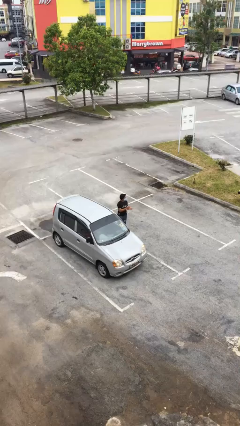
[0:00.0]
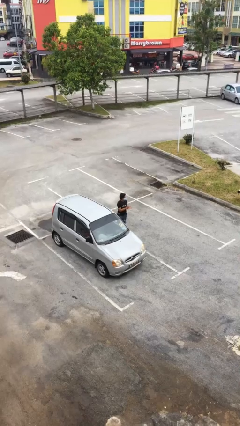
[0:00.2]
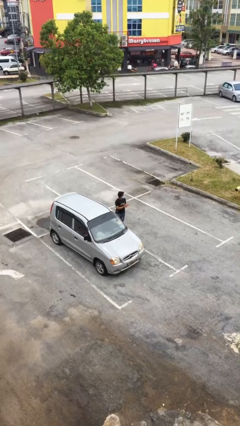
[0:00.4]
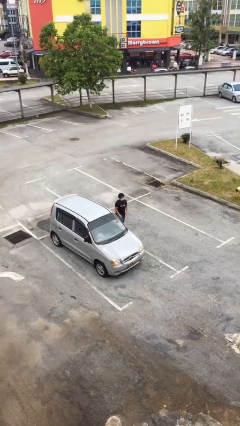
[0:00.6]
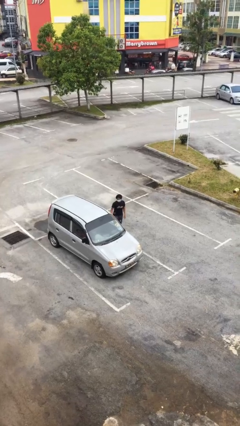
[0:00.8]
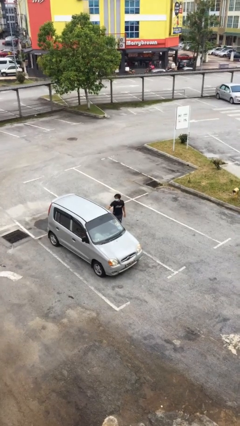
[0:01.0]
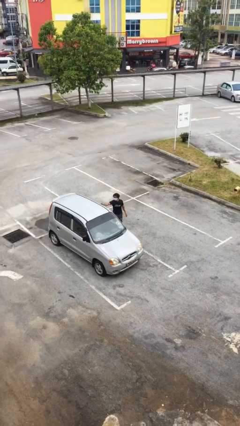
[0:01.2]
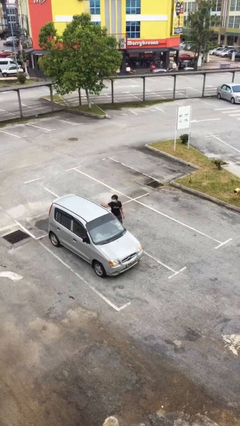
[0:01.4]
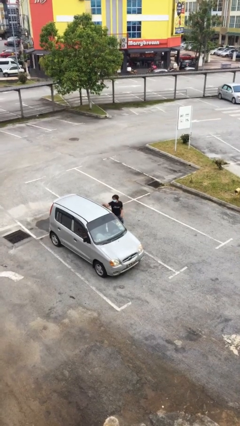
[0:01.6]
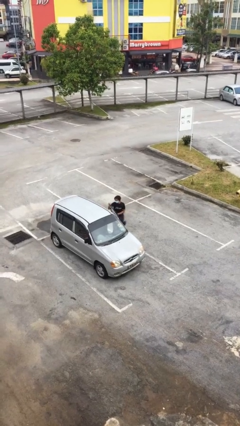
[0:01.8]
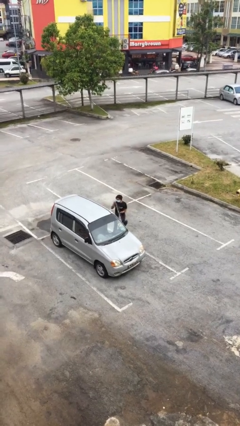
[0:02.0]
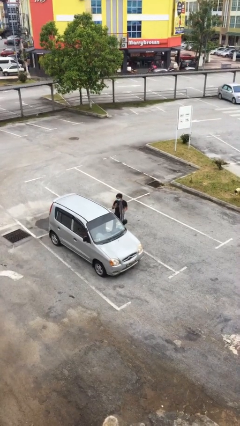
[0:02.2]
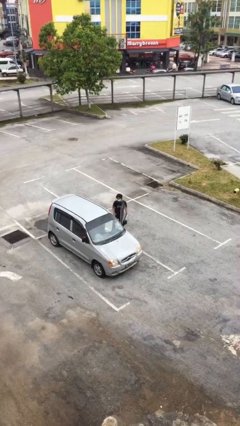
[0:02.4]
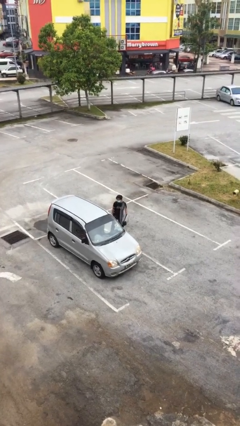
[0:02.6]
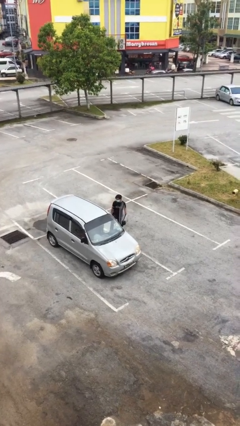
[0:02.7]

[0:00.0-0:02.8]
person opens car door

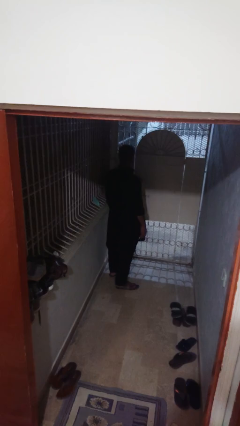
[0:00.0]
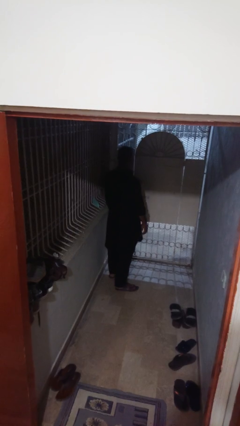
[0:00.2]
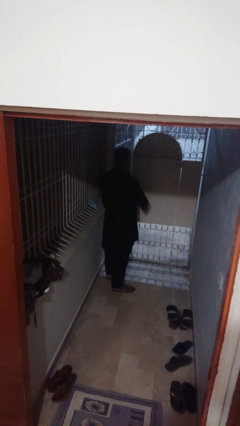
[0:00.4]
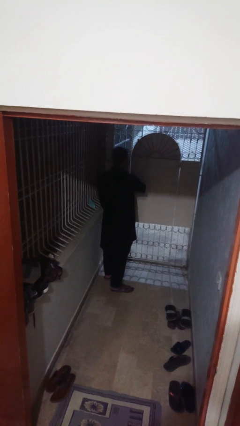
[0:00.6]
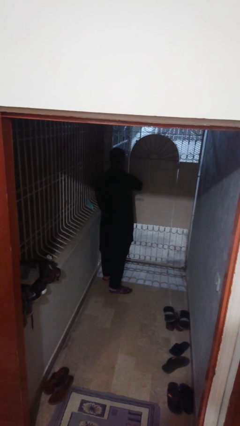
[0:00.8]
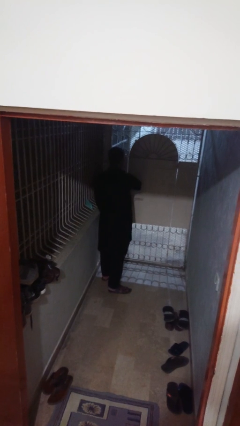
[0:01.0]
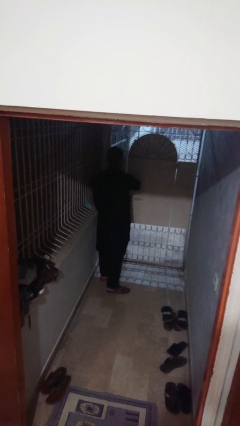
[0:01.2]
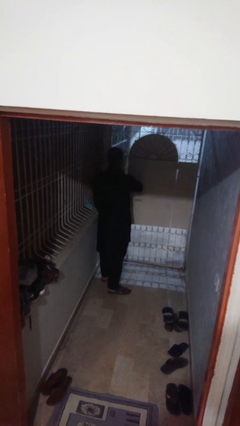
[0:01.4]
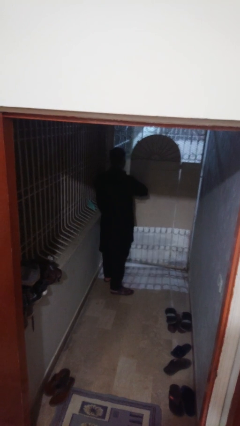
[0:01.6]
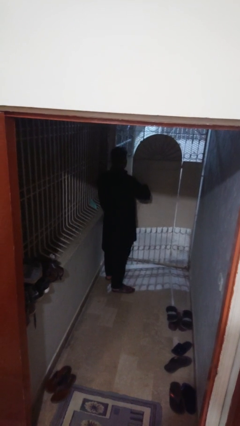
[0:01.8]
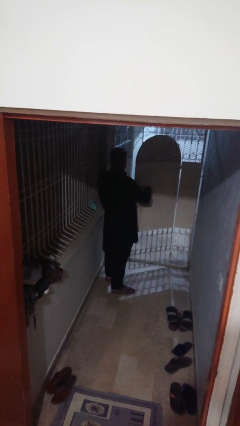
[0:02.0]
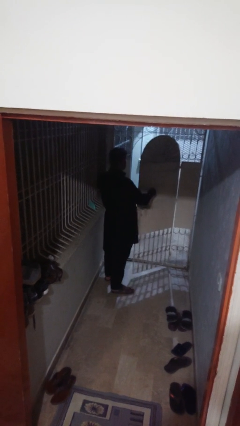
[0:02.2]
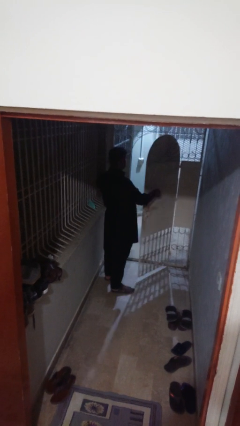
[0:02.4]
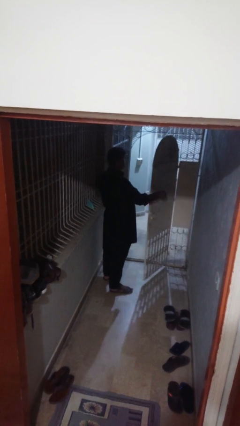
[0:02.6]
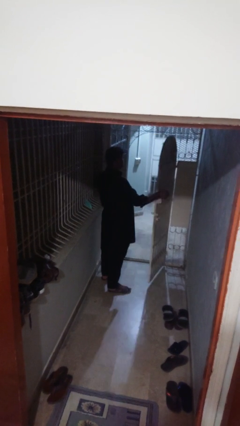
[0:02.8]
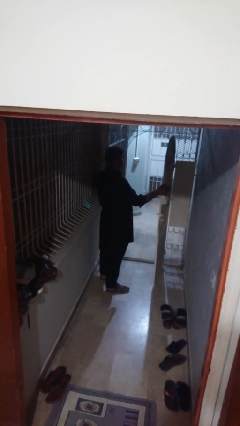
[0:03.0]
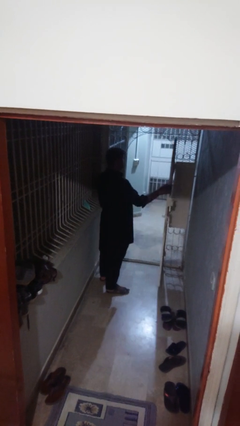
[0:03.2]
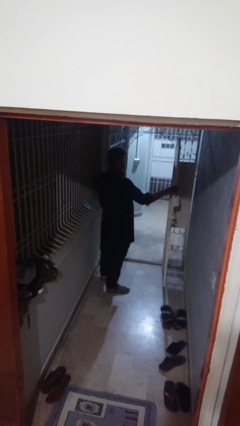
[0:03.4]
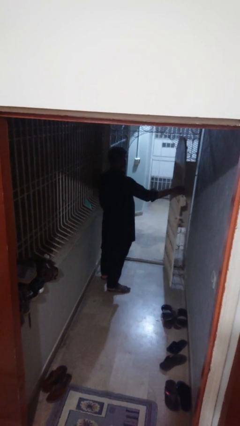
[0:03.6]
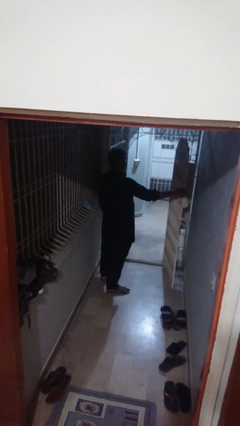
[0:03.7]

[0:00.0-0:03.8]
person opens gate

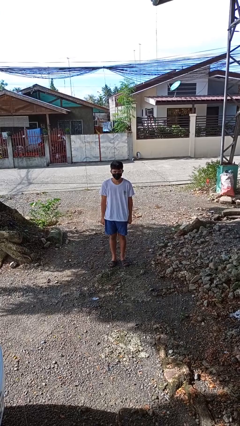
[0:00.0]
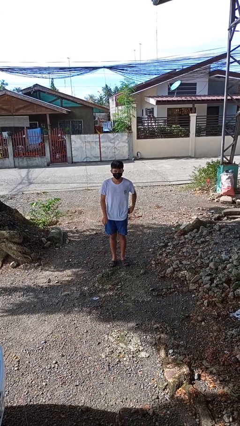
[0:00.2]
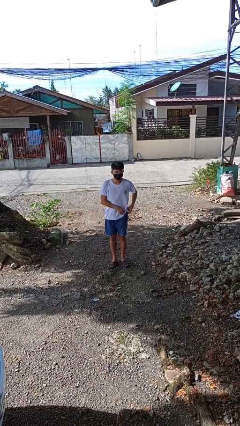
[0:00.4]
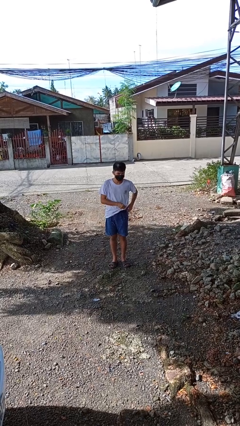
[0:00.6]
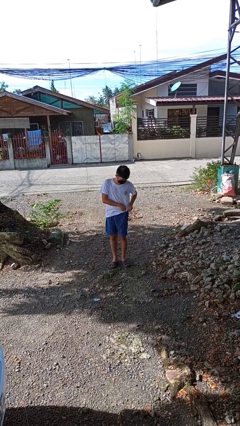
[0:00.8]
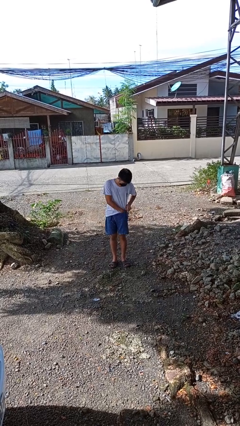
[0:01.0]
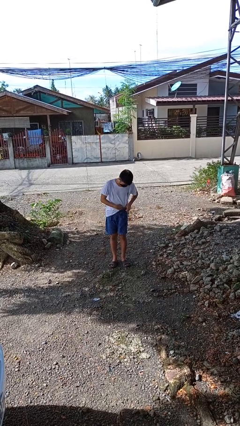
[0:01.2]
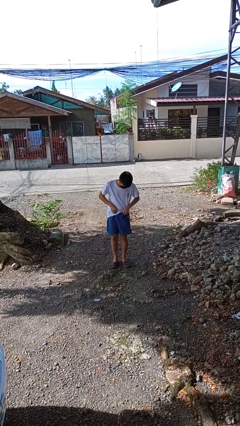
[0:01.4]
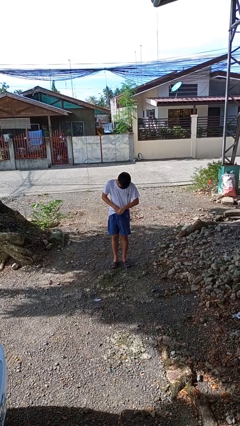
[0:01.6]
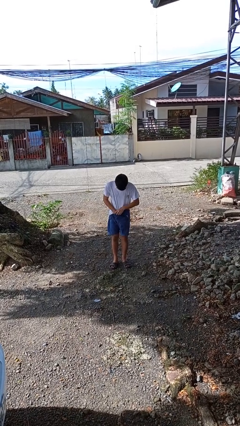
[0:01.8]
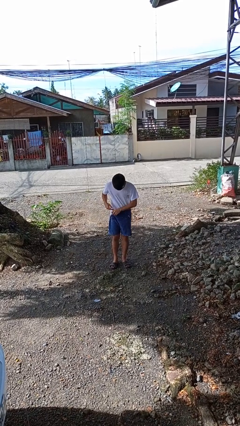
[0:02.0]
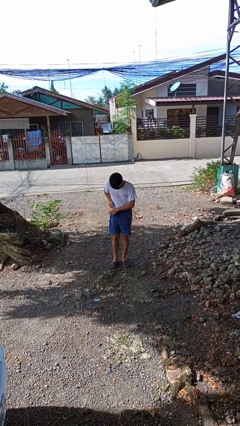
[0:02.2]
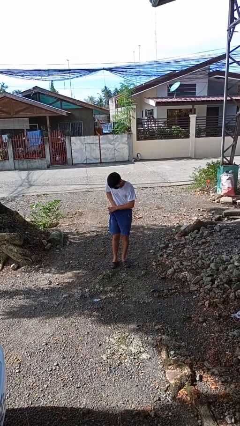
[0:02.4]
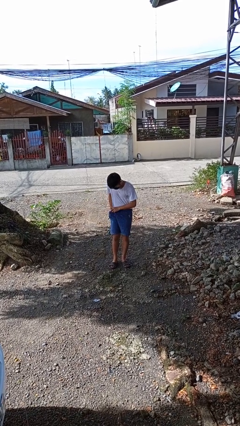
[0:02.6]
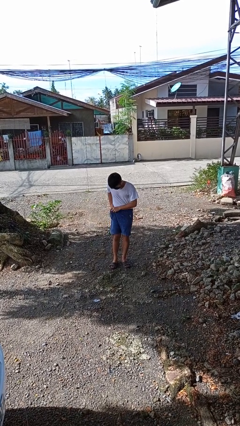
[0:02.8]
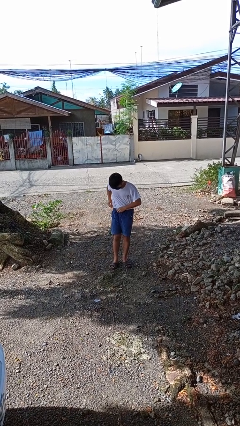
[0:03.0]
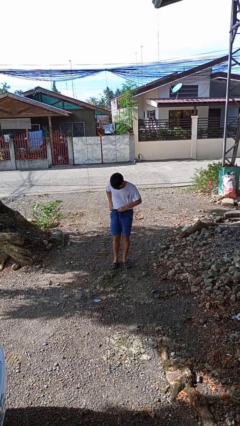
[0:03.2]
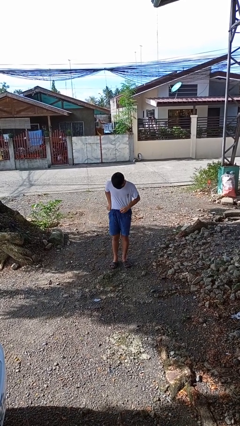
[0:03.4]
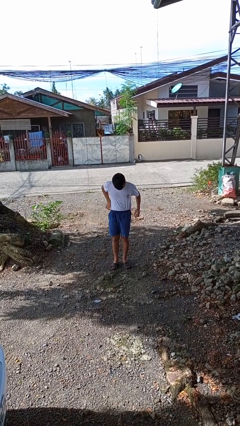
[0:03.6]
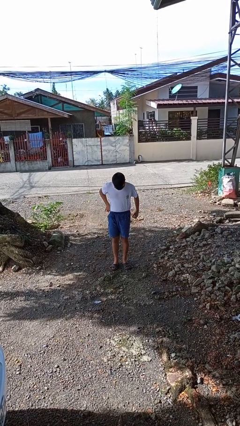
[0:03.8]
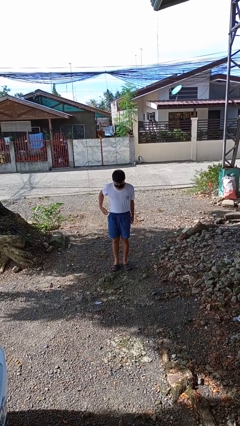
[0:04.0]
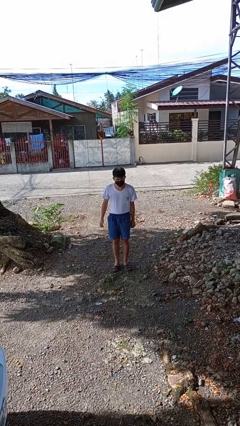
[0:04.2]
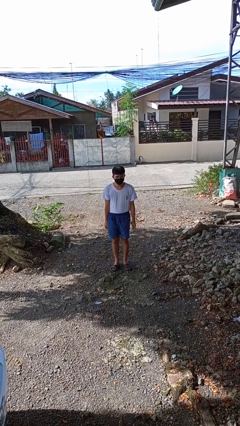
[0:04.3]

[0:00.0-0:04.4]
person tucks in shirt

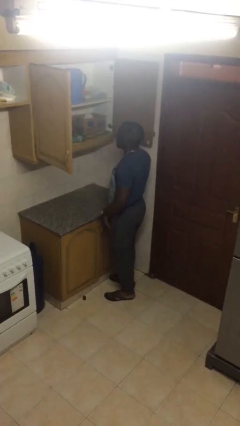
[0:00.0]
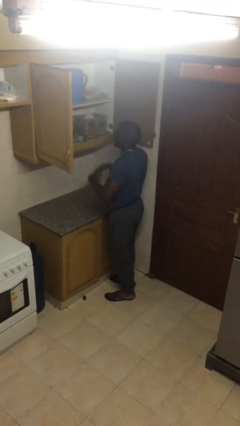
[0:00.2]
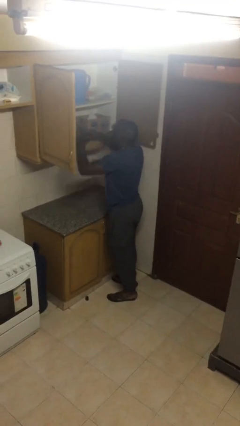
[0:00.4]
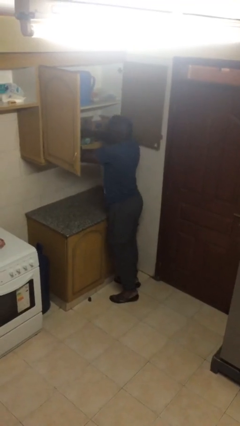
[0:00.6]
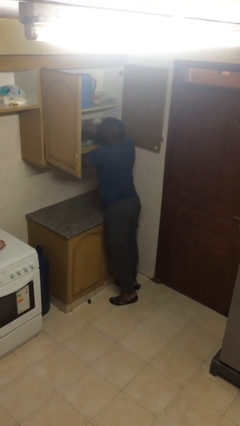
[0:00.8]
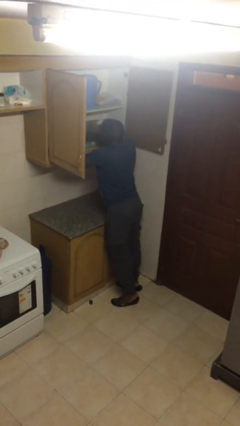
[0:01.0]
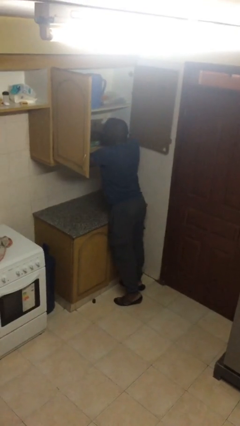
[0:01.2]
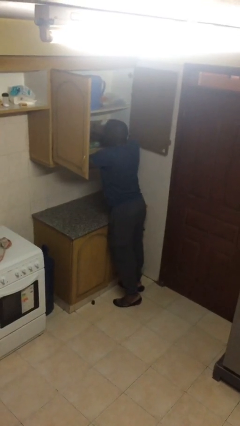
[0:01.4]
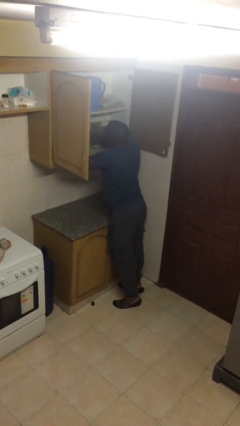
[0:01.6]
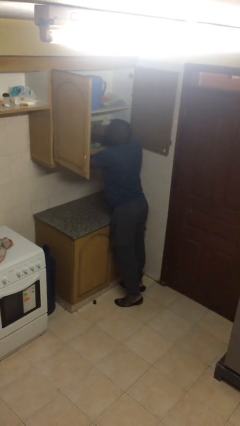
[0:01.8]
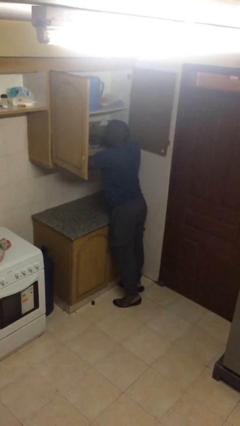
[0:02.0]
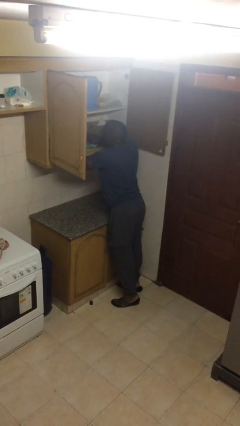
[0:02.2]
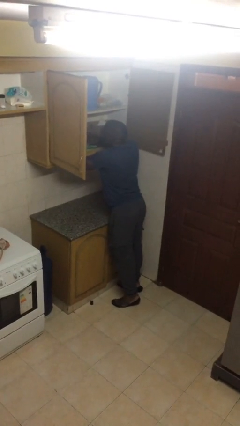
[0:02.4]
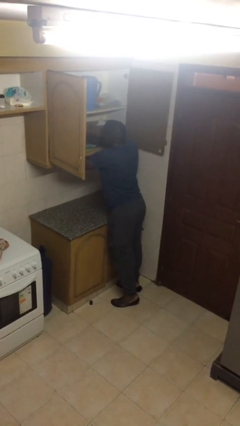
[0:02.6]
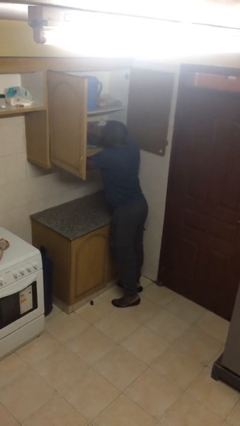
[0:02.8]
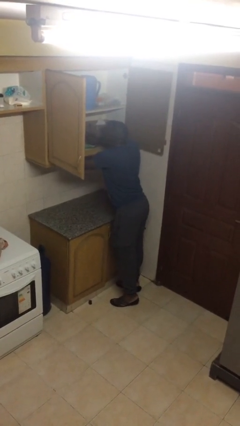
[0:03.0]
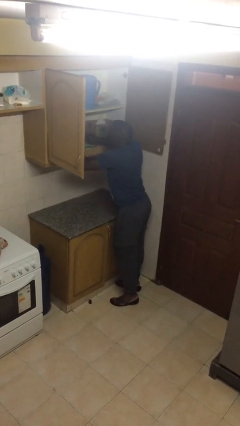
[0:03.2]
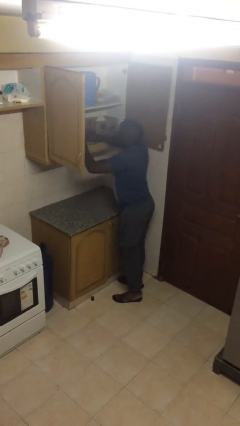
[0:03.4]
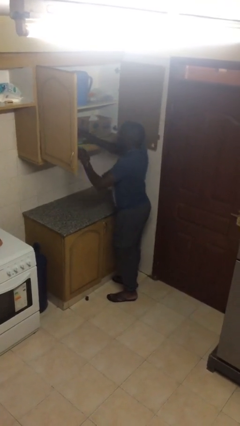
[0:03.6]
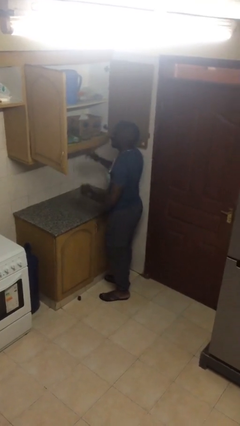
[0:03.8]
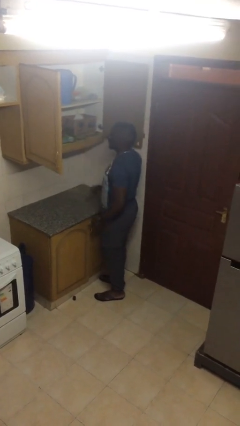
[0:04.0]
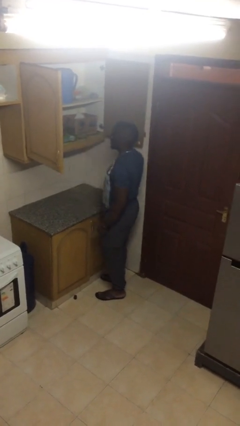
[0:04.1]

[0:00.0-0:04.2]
person searches in cabinet

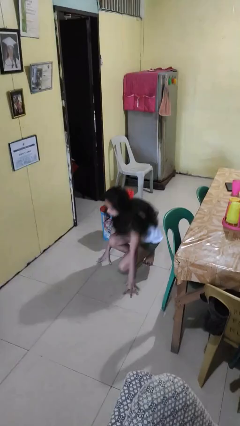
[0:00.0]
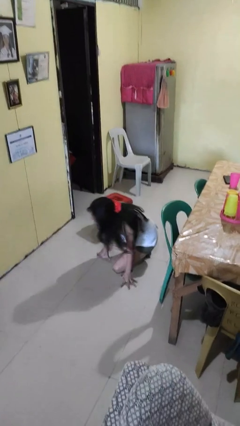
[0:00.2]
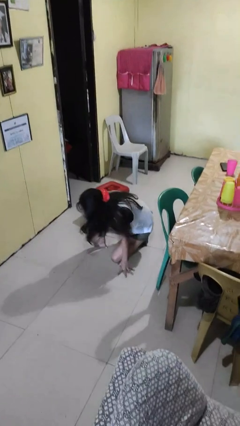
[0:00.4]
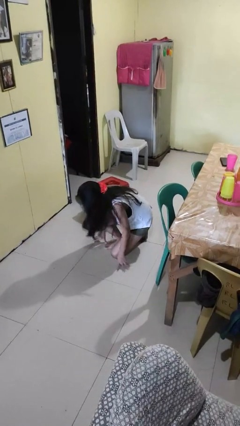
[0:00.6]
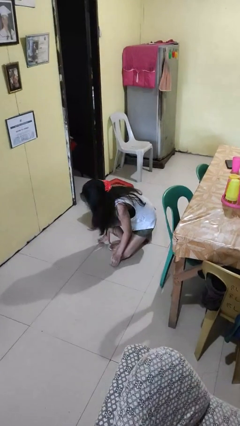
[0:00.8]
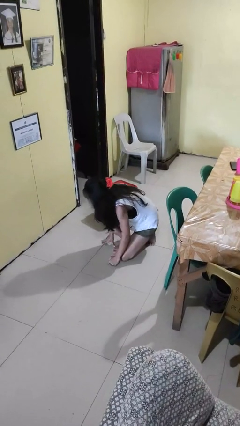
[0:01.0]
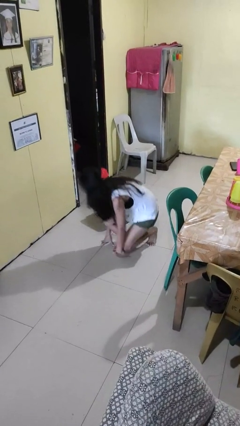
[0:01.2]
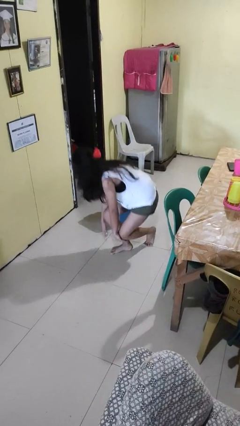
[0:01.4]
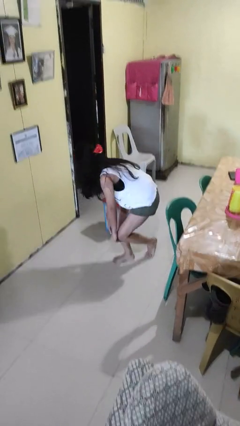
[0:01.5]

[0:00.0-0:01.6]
person lies down on floor

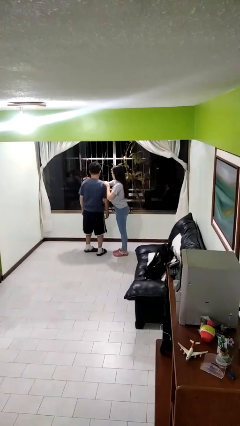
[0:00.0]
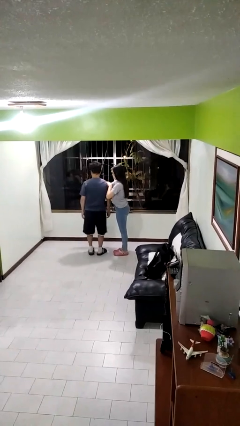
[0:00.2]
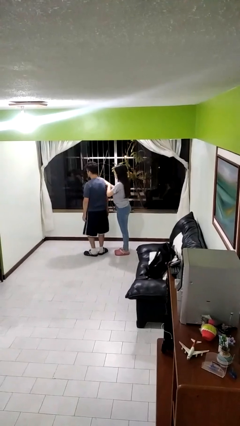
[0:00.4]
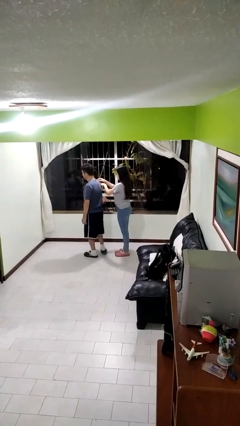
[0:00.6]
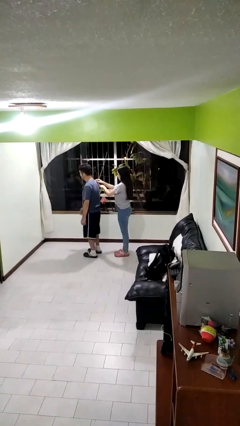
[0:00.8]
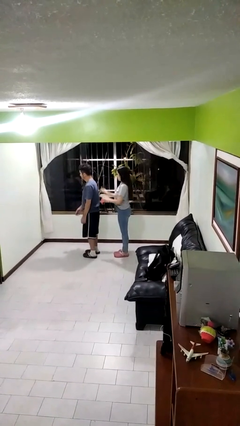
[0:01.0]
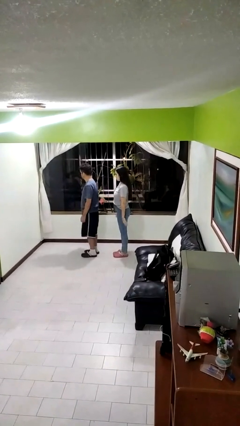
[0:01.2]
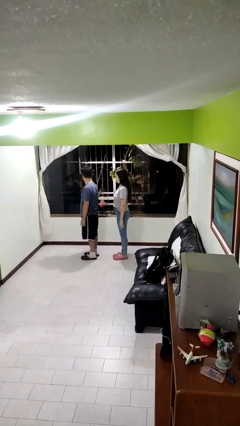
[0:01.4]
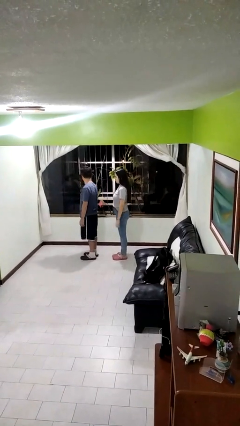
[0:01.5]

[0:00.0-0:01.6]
person spins person around
